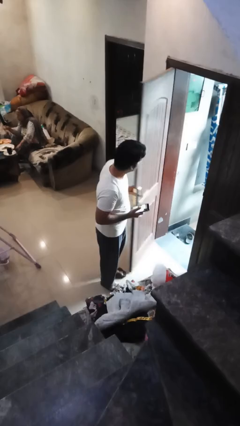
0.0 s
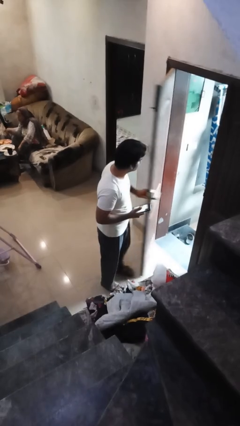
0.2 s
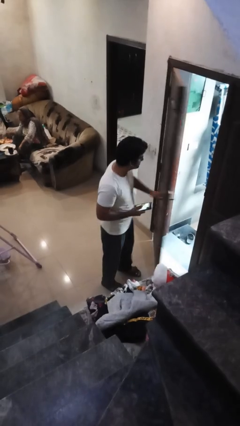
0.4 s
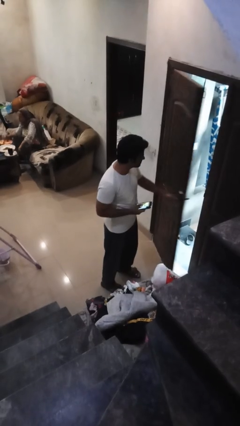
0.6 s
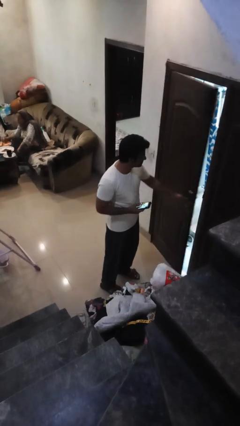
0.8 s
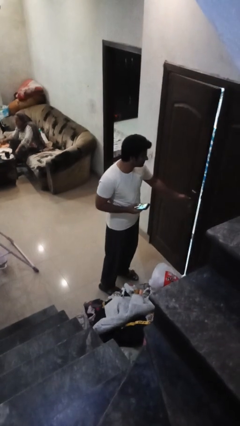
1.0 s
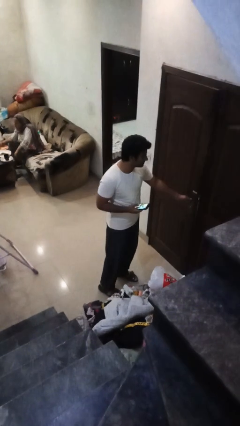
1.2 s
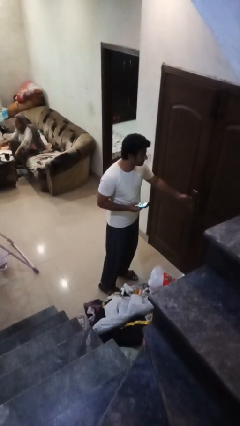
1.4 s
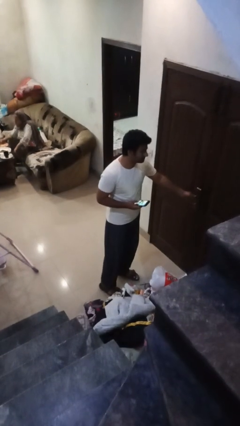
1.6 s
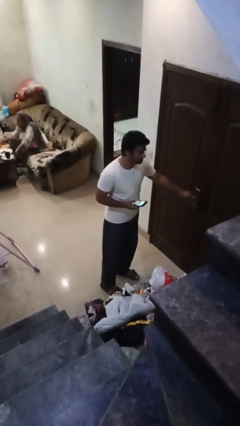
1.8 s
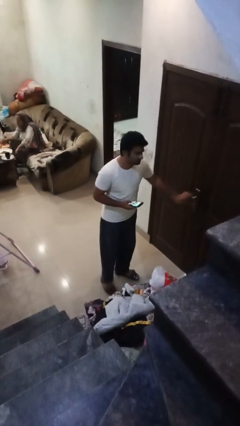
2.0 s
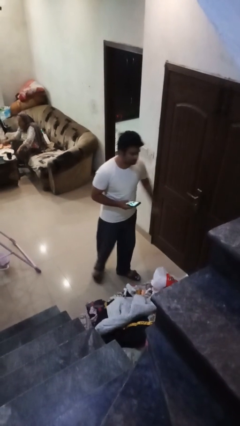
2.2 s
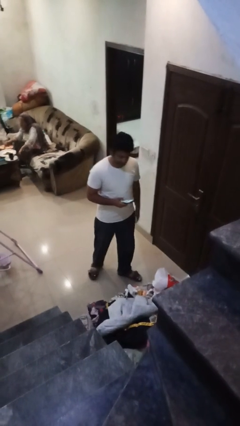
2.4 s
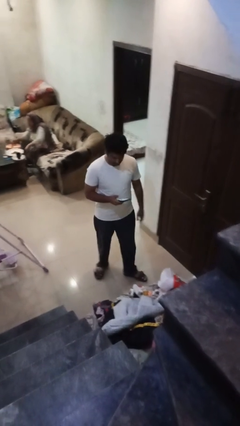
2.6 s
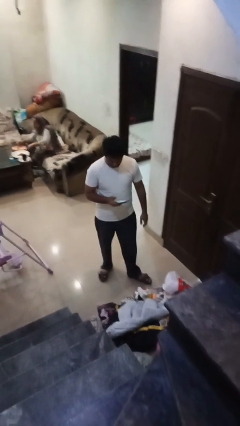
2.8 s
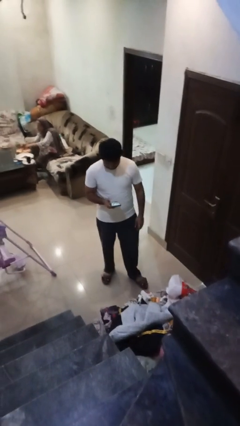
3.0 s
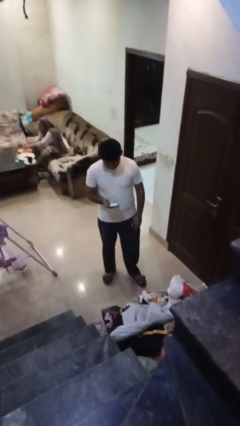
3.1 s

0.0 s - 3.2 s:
person closes facility door

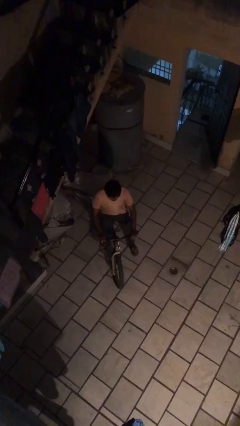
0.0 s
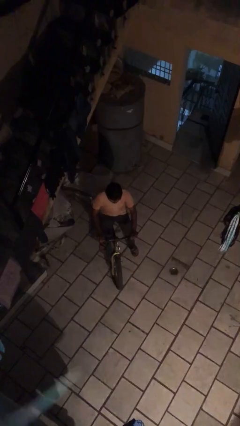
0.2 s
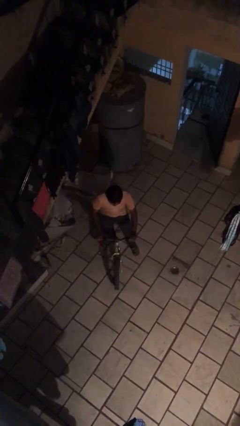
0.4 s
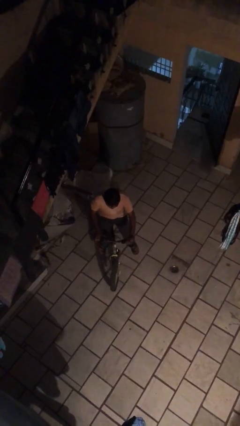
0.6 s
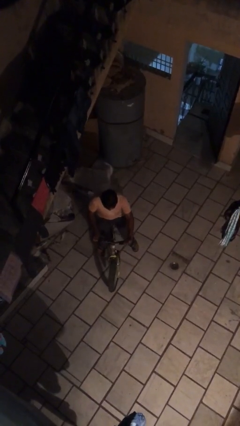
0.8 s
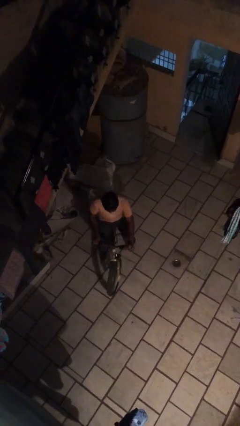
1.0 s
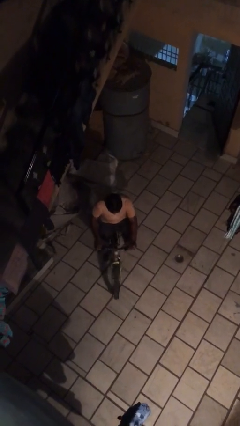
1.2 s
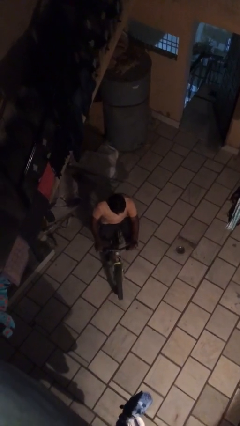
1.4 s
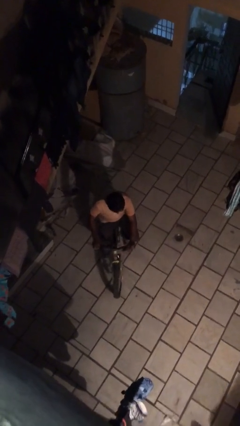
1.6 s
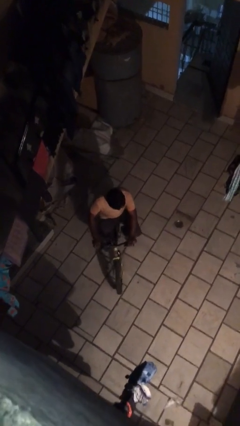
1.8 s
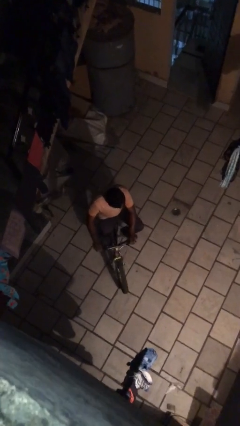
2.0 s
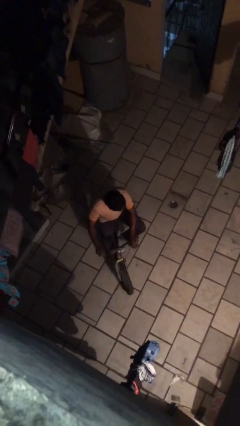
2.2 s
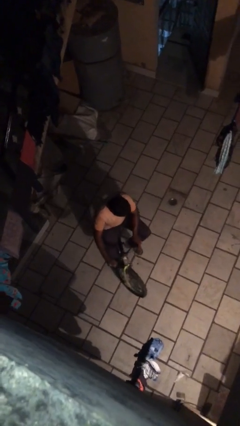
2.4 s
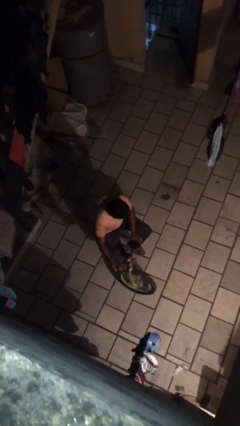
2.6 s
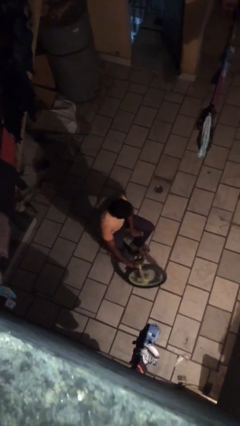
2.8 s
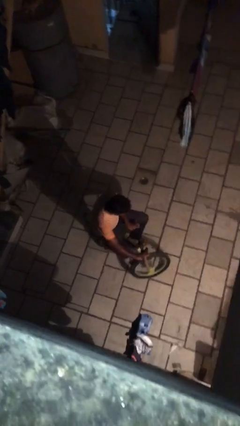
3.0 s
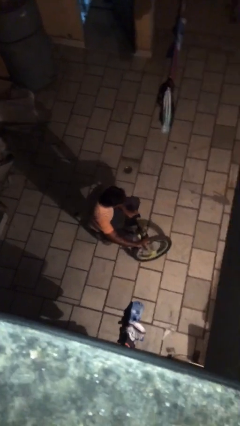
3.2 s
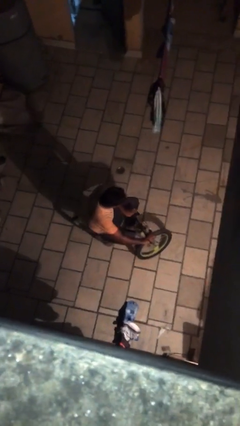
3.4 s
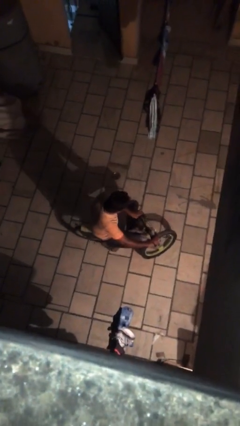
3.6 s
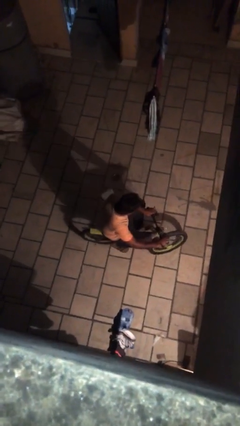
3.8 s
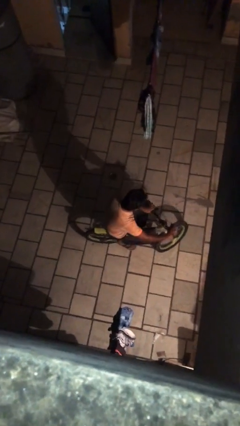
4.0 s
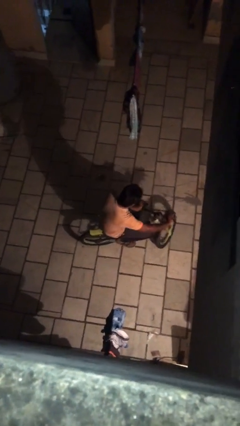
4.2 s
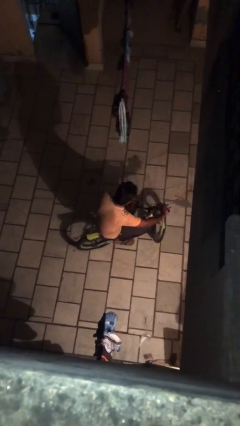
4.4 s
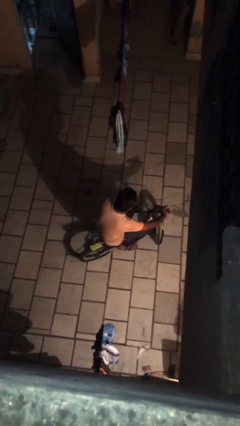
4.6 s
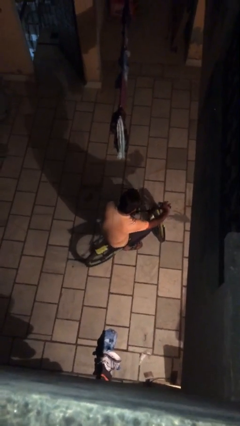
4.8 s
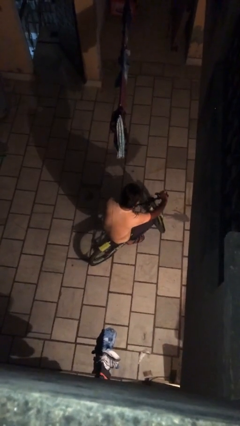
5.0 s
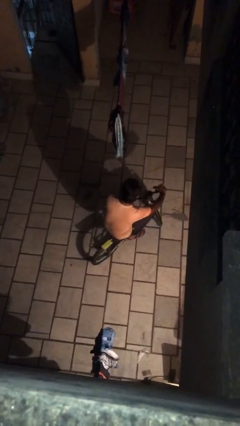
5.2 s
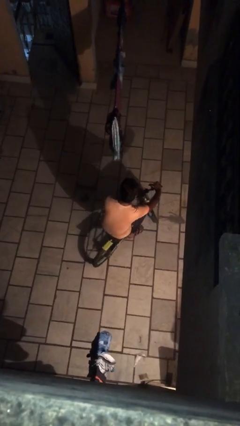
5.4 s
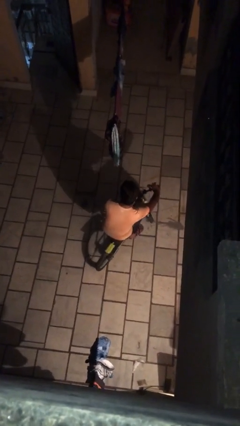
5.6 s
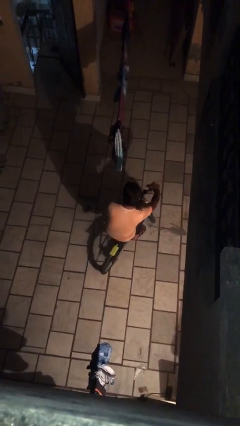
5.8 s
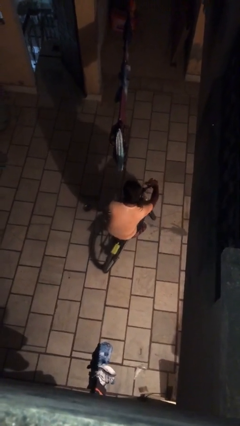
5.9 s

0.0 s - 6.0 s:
person rides bicycle

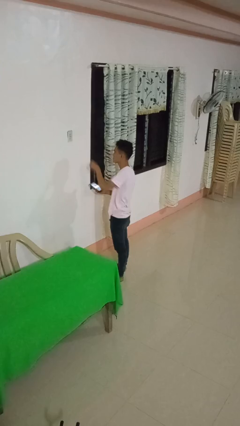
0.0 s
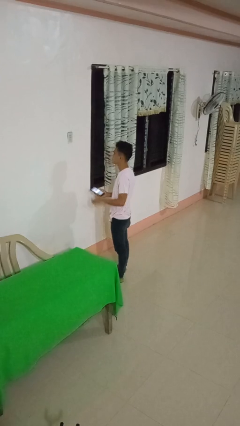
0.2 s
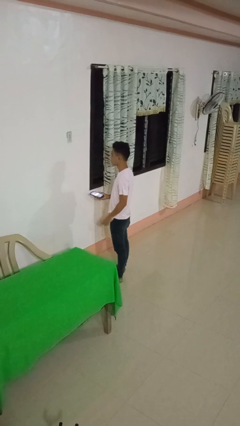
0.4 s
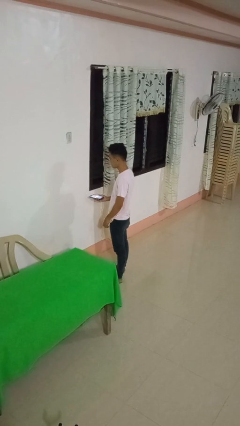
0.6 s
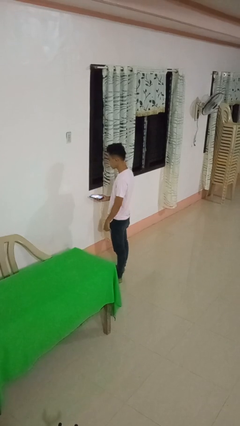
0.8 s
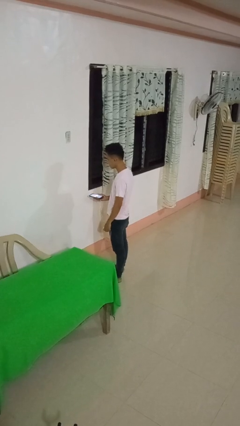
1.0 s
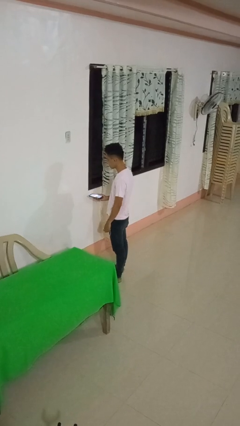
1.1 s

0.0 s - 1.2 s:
person unplugs from electrical socket

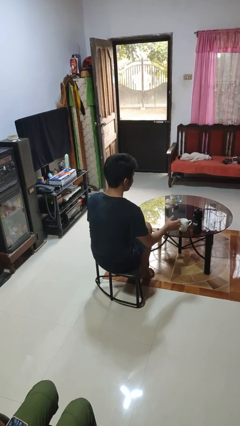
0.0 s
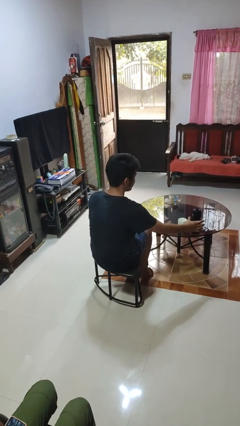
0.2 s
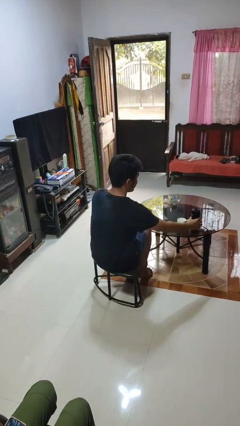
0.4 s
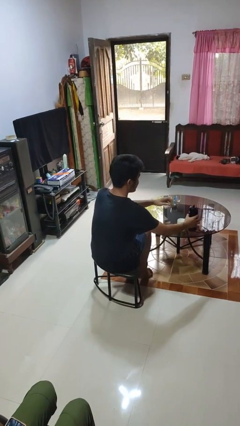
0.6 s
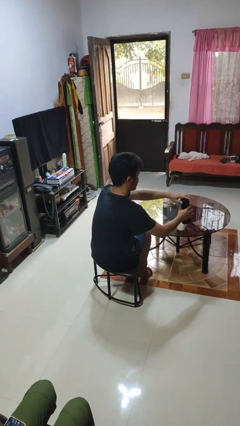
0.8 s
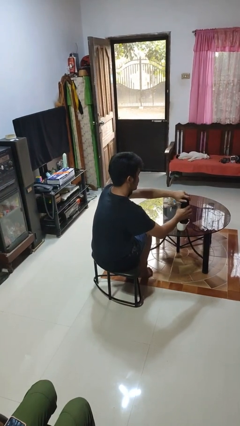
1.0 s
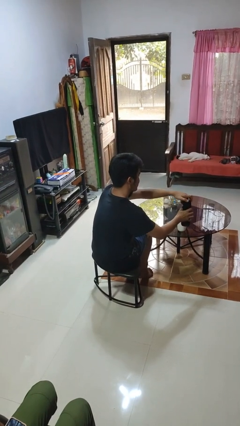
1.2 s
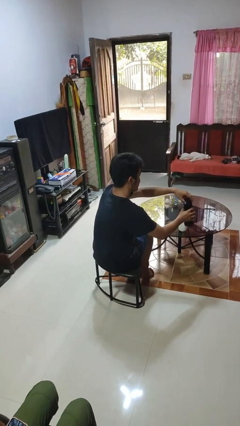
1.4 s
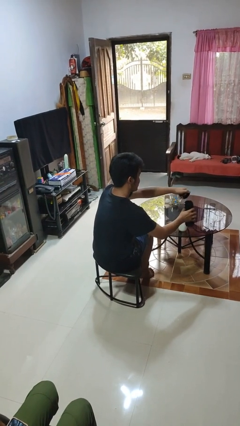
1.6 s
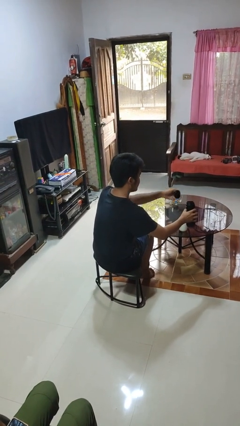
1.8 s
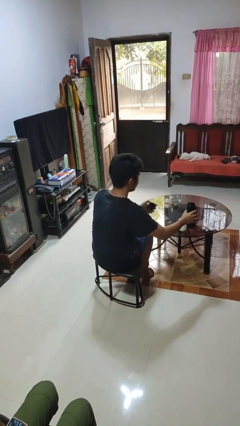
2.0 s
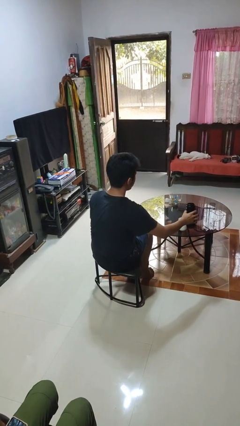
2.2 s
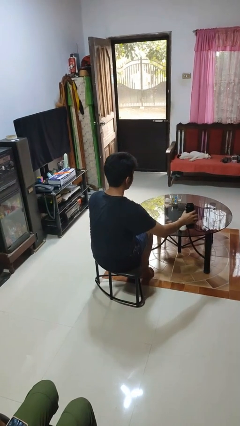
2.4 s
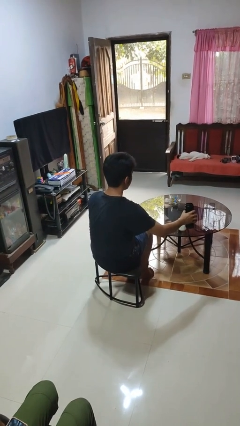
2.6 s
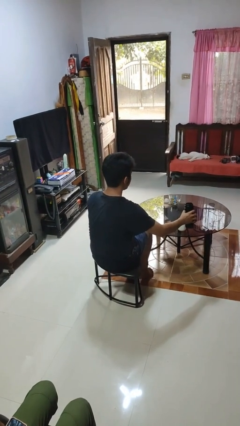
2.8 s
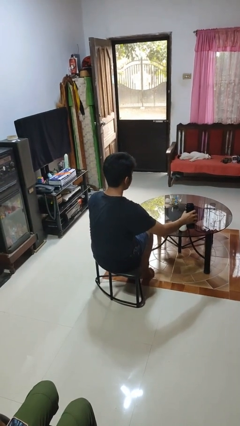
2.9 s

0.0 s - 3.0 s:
person unscrews lid from bottle

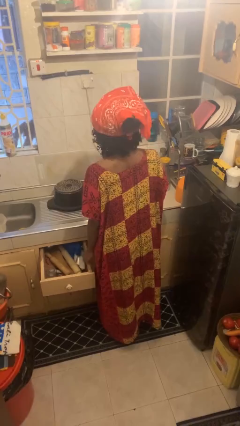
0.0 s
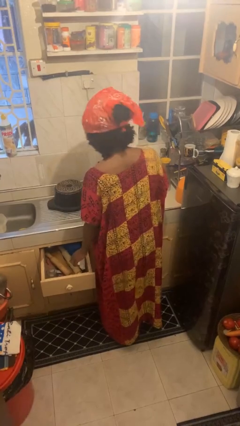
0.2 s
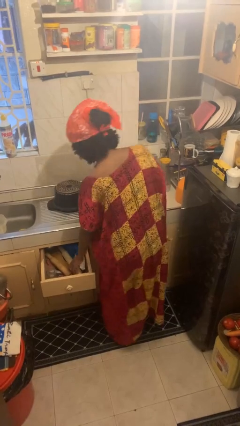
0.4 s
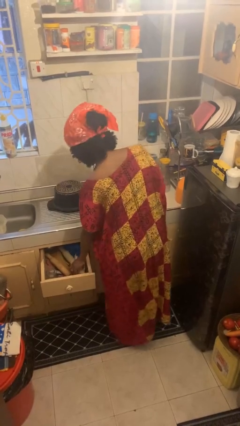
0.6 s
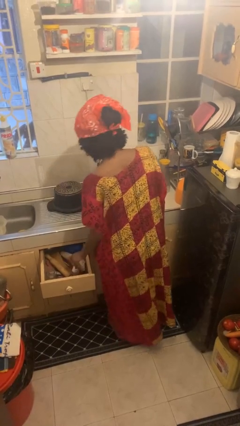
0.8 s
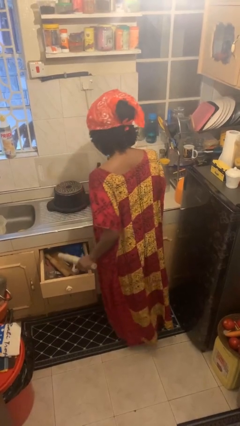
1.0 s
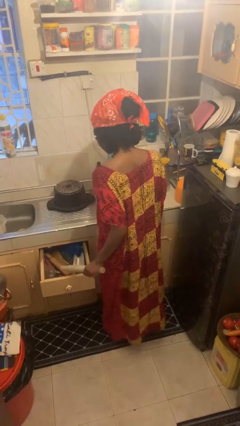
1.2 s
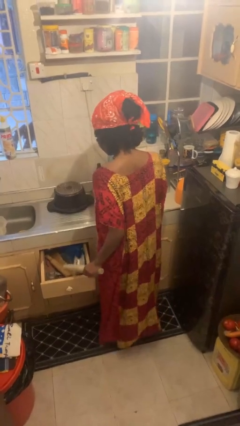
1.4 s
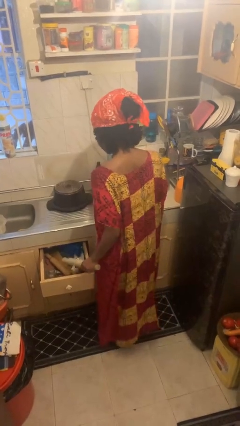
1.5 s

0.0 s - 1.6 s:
person takes object from kitchen drawer

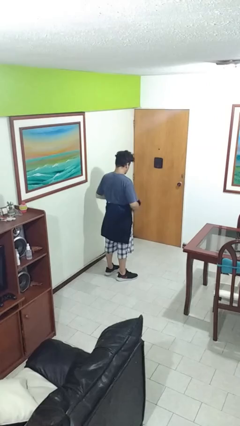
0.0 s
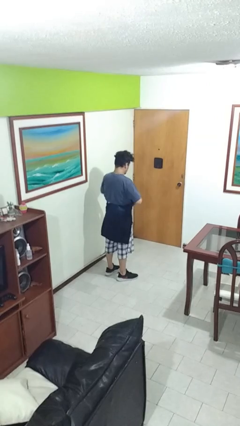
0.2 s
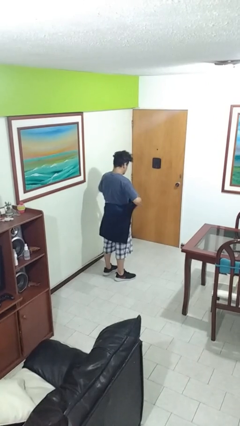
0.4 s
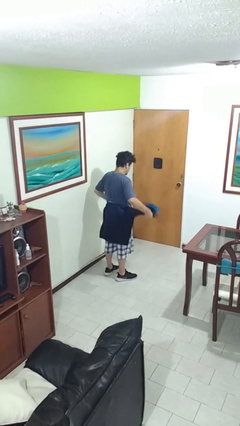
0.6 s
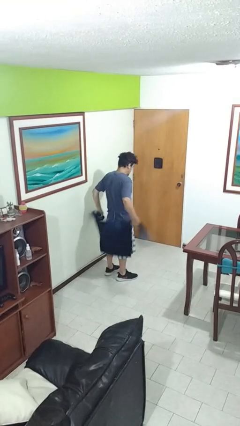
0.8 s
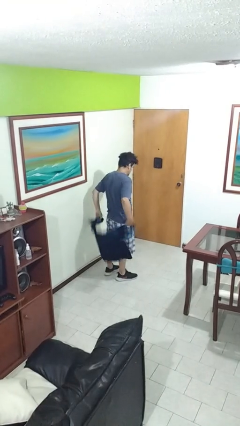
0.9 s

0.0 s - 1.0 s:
person unties jacket around waist

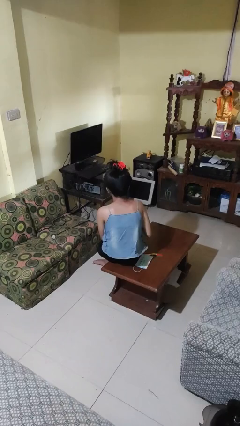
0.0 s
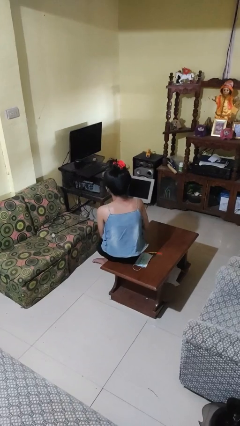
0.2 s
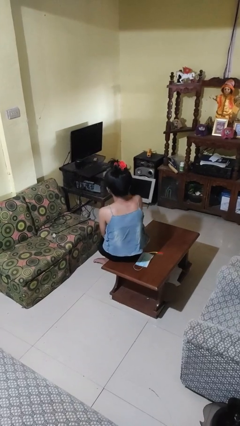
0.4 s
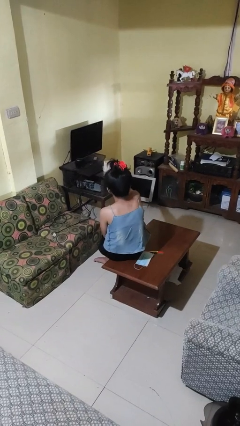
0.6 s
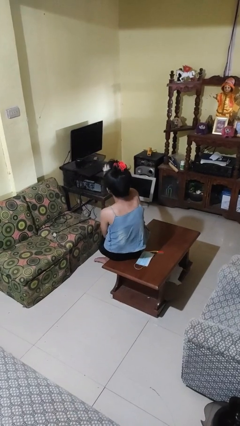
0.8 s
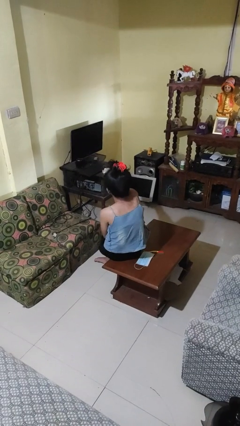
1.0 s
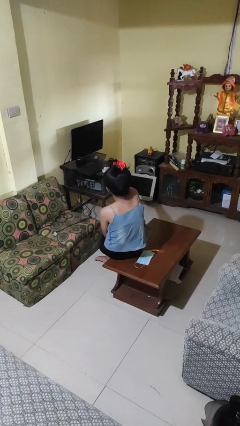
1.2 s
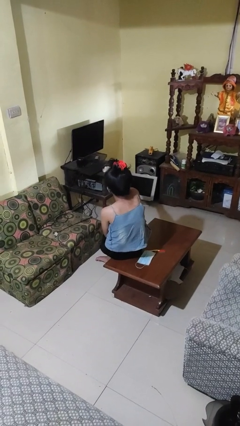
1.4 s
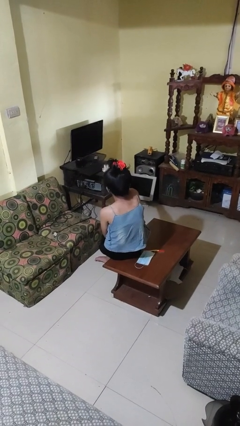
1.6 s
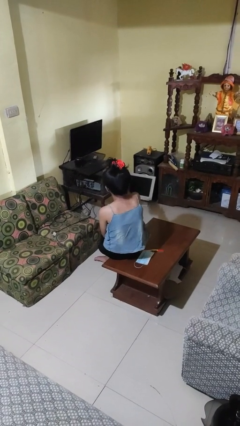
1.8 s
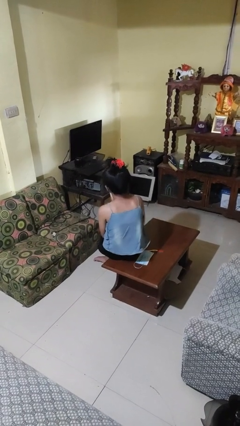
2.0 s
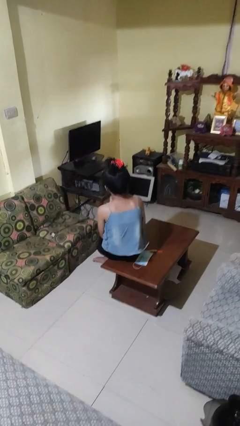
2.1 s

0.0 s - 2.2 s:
person uses television remote
